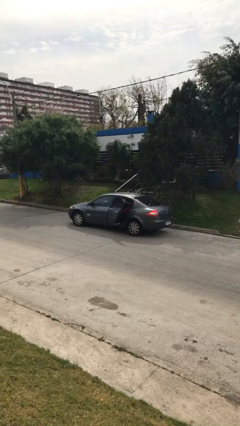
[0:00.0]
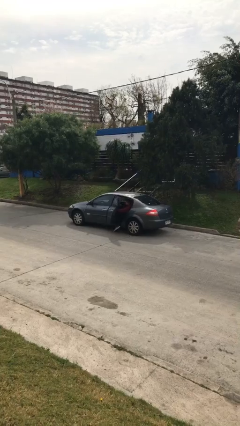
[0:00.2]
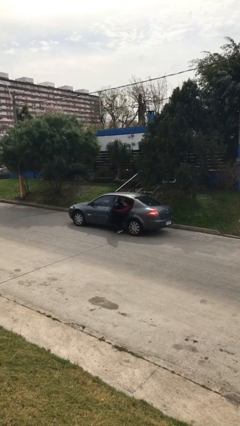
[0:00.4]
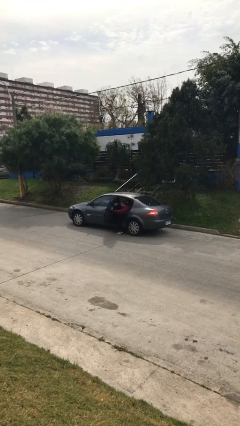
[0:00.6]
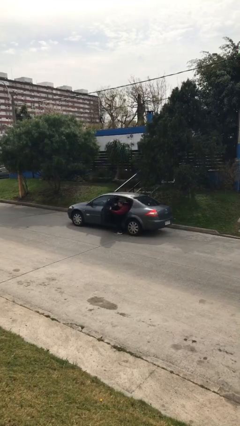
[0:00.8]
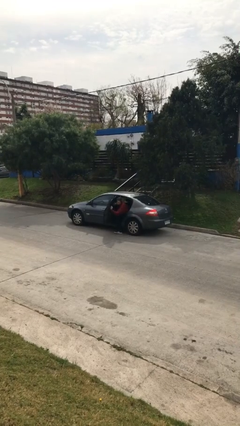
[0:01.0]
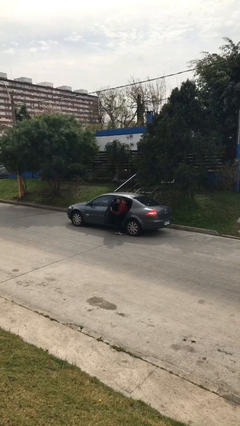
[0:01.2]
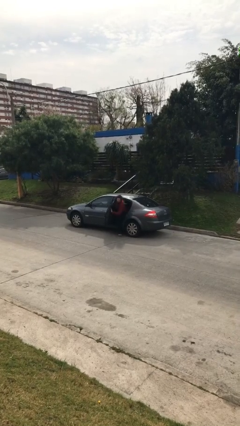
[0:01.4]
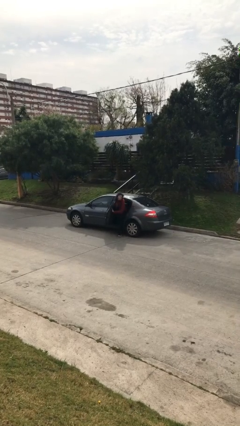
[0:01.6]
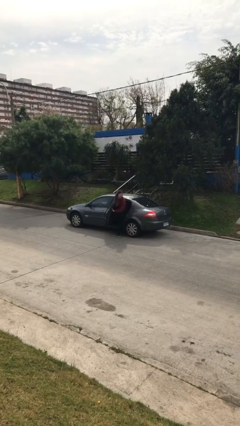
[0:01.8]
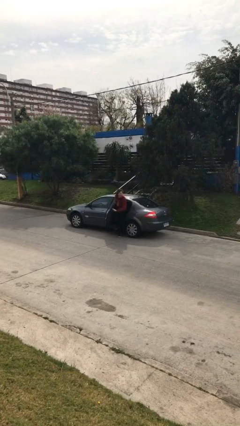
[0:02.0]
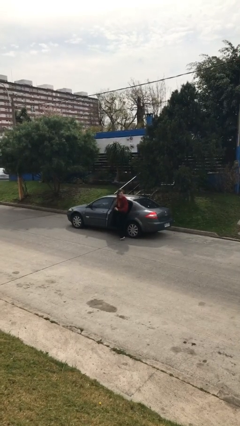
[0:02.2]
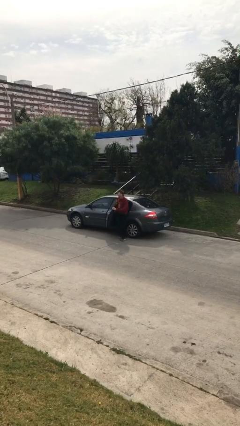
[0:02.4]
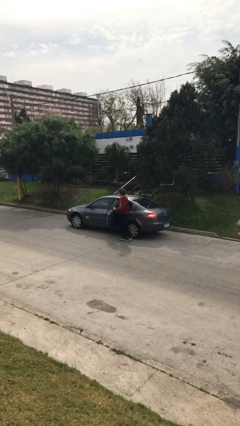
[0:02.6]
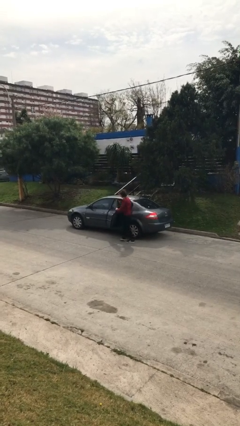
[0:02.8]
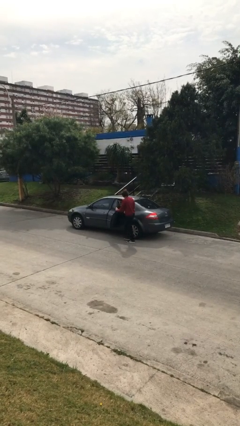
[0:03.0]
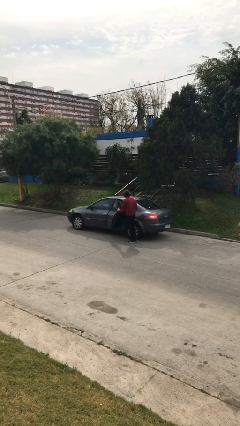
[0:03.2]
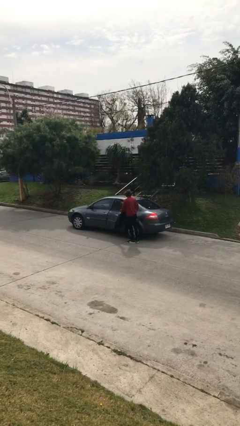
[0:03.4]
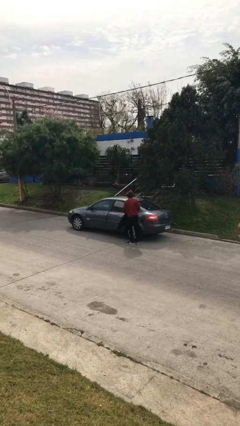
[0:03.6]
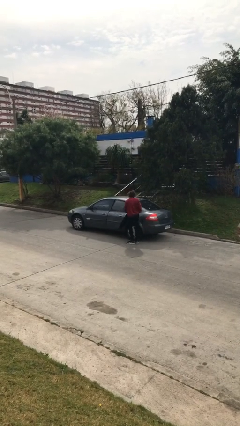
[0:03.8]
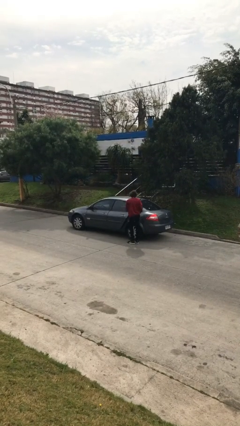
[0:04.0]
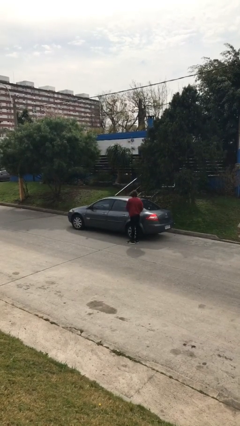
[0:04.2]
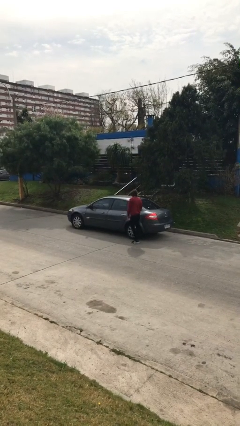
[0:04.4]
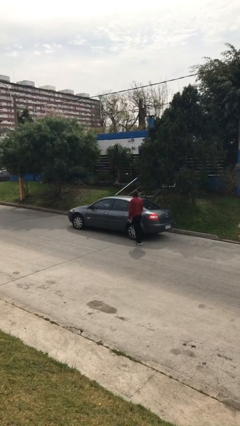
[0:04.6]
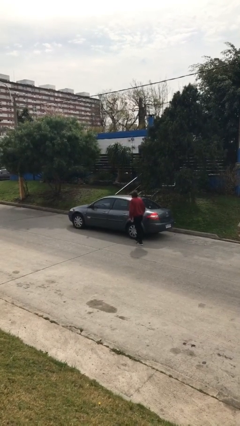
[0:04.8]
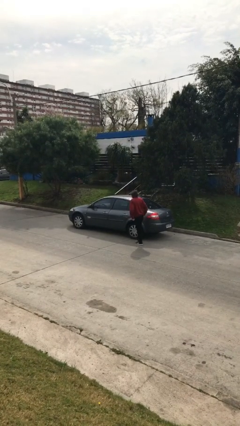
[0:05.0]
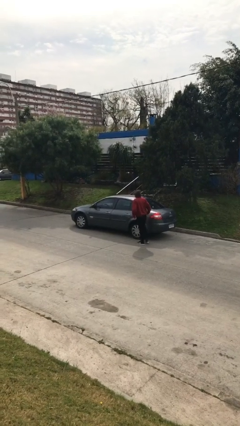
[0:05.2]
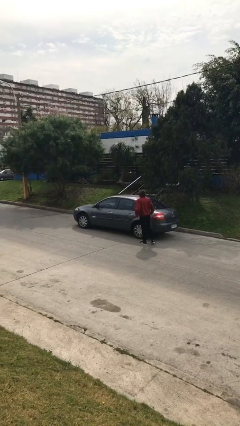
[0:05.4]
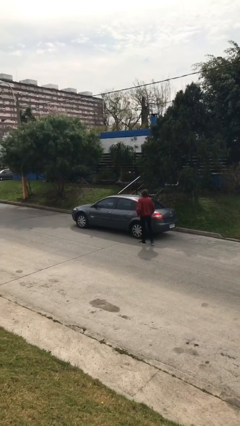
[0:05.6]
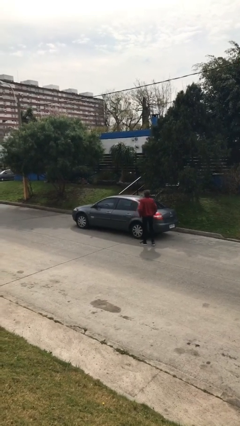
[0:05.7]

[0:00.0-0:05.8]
car drops off person

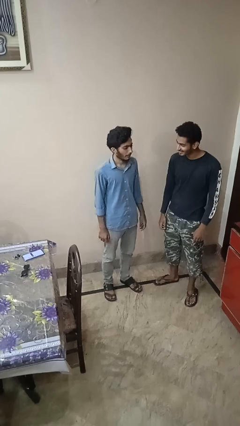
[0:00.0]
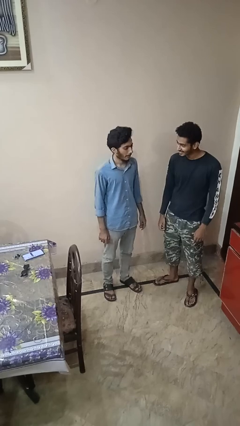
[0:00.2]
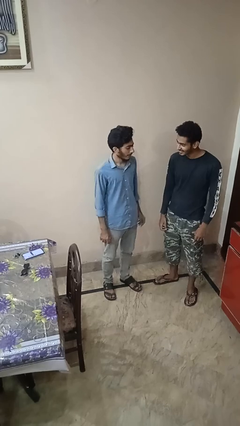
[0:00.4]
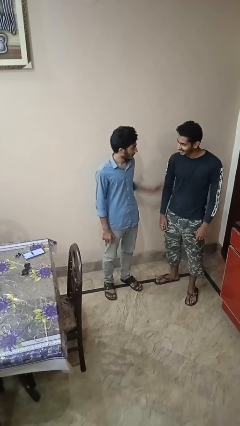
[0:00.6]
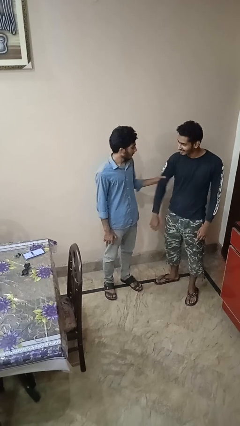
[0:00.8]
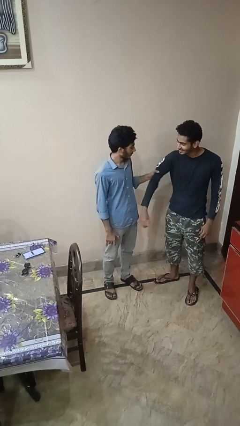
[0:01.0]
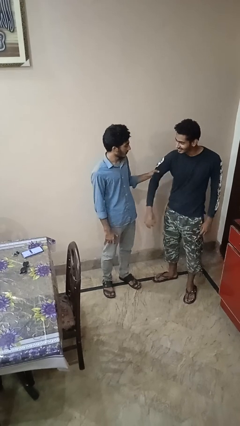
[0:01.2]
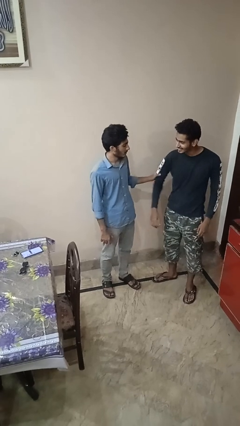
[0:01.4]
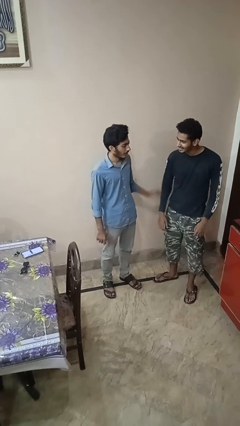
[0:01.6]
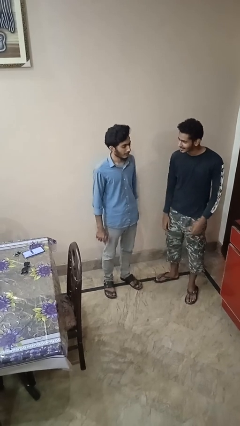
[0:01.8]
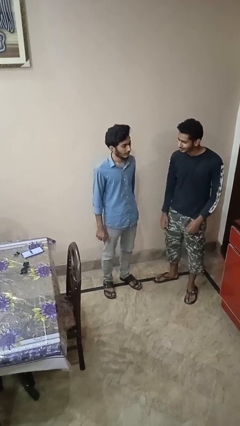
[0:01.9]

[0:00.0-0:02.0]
person grabs person by bicep

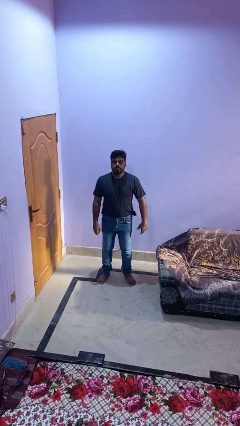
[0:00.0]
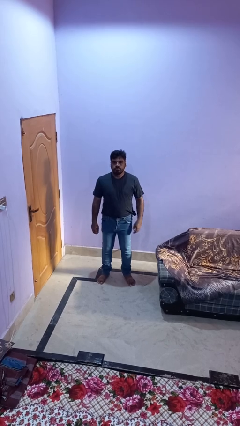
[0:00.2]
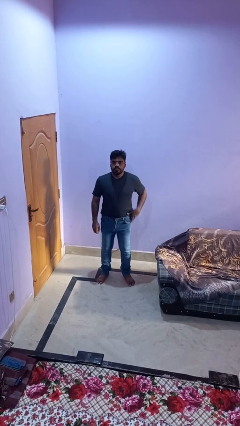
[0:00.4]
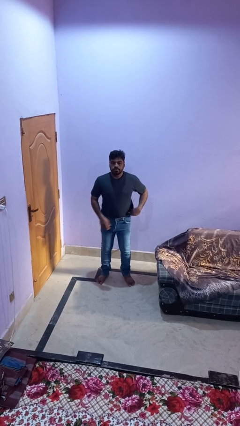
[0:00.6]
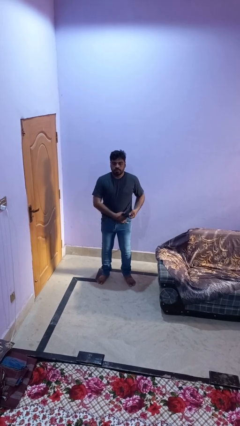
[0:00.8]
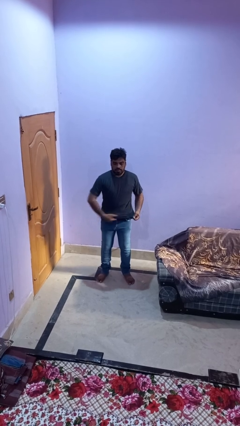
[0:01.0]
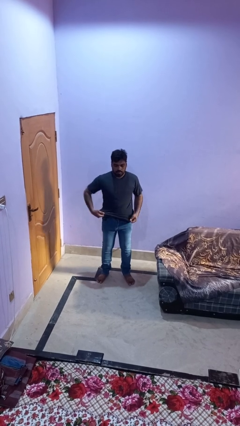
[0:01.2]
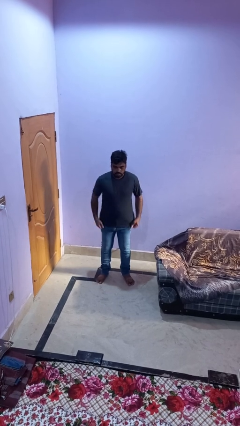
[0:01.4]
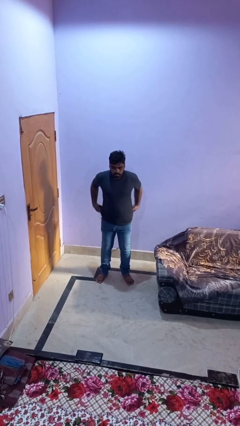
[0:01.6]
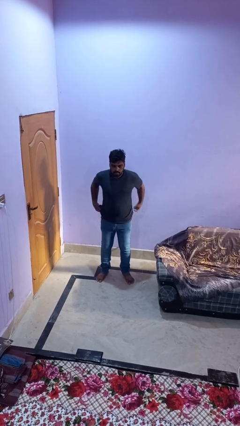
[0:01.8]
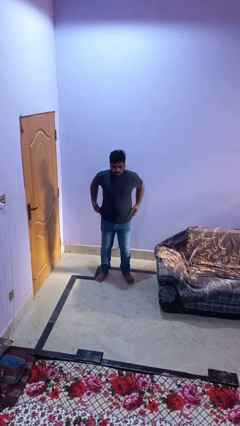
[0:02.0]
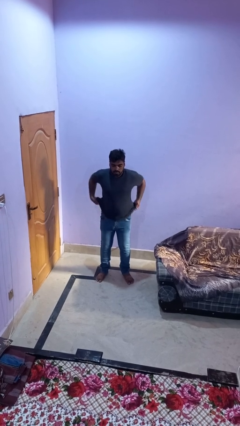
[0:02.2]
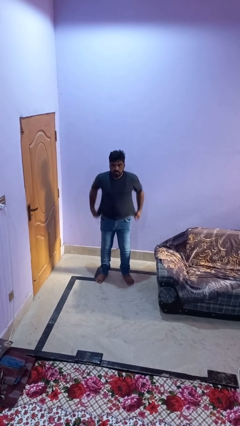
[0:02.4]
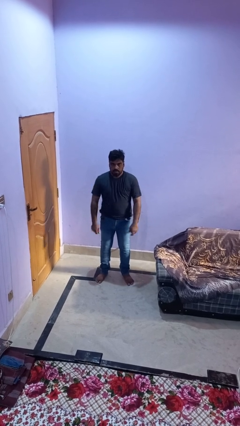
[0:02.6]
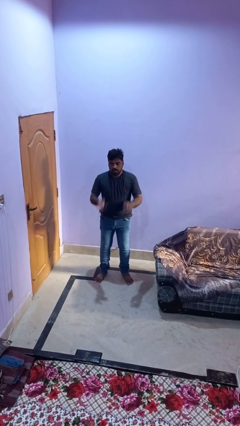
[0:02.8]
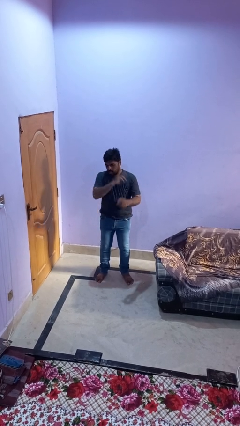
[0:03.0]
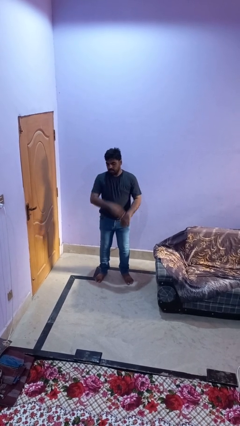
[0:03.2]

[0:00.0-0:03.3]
person untucks shirt

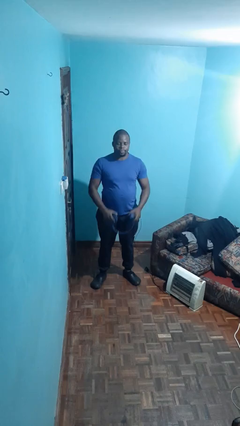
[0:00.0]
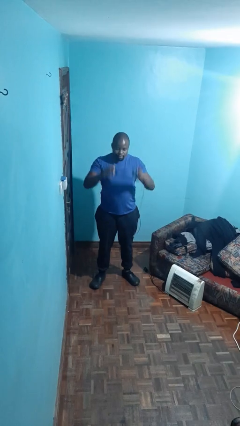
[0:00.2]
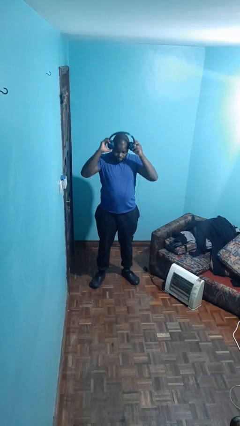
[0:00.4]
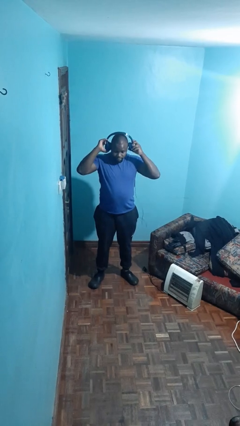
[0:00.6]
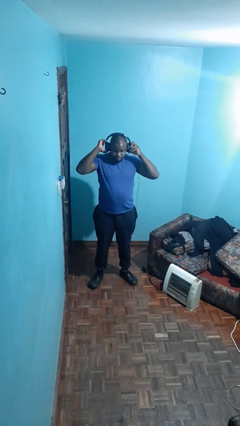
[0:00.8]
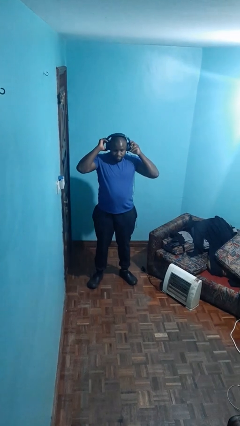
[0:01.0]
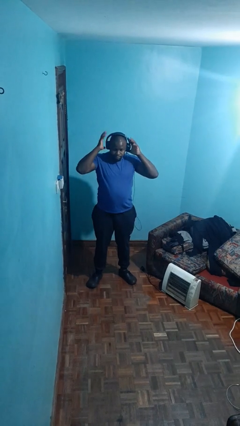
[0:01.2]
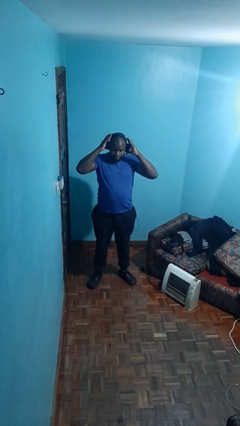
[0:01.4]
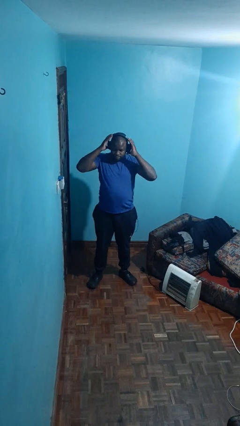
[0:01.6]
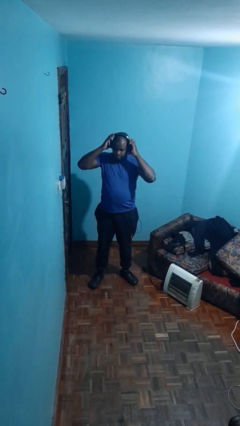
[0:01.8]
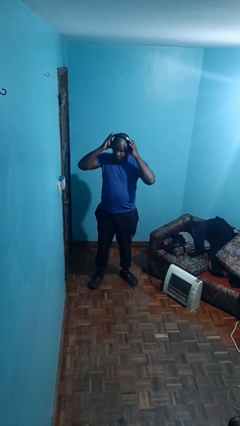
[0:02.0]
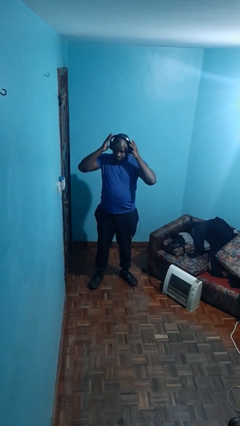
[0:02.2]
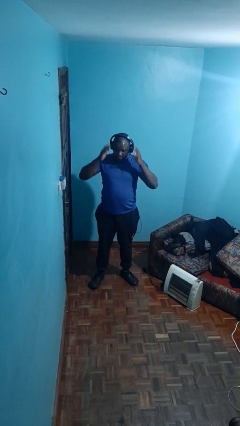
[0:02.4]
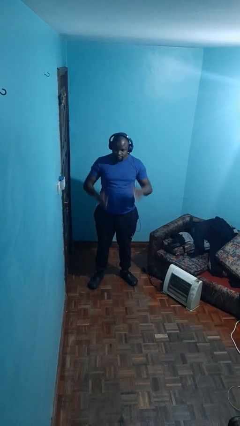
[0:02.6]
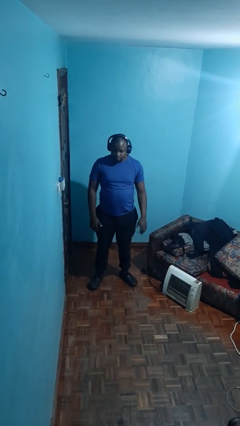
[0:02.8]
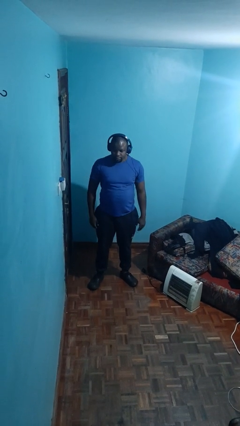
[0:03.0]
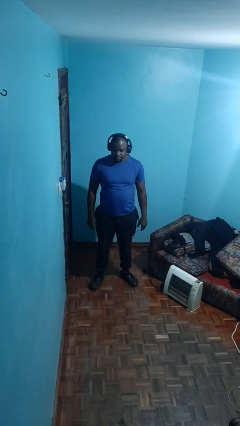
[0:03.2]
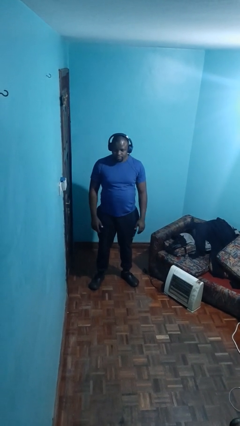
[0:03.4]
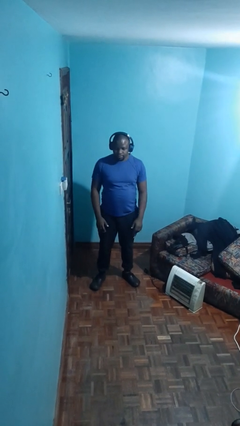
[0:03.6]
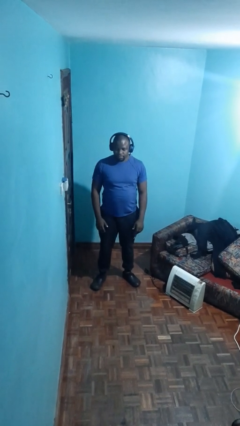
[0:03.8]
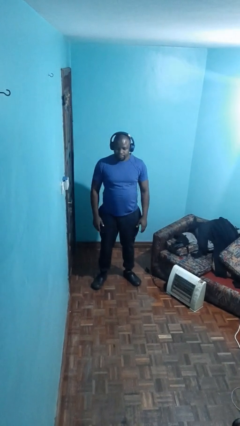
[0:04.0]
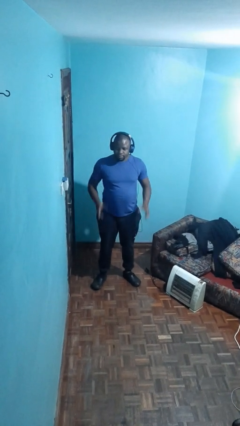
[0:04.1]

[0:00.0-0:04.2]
person puts on headphones

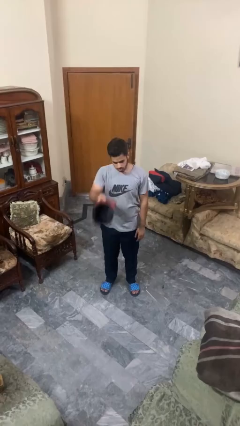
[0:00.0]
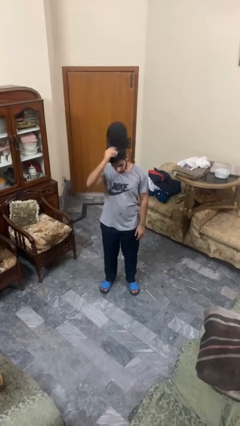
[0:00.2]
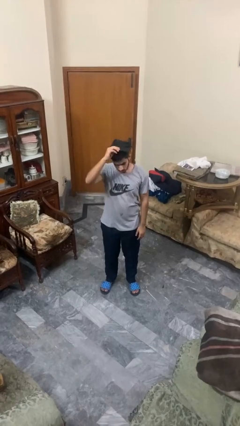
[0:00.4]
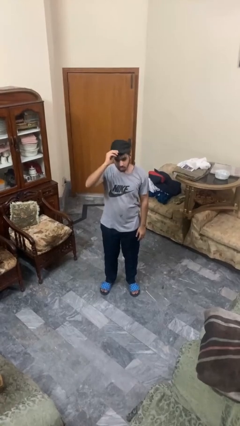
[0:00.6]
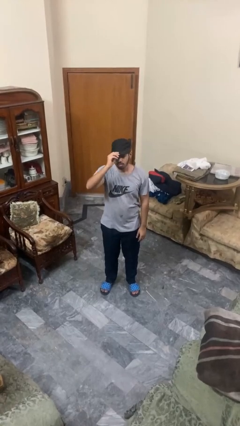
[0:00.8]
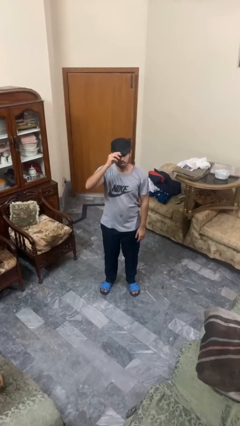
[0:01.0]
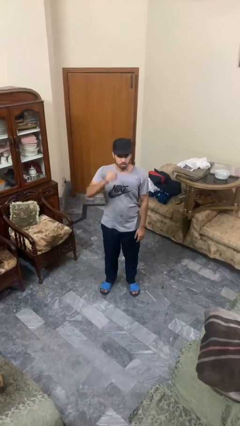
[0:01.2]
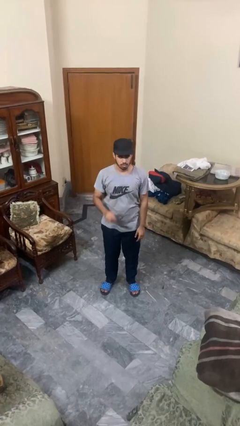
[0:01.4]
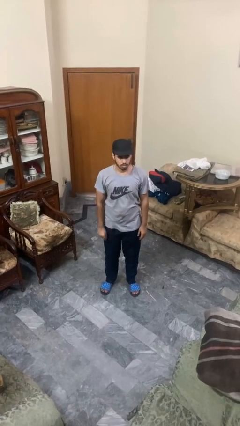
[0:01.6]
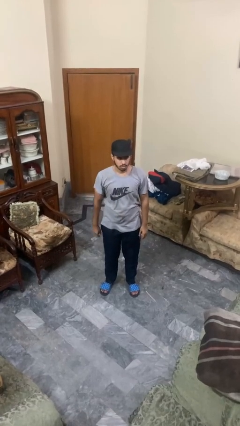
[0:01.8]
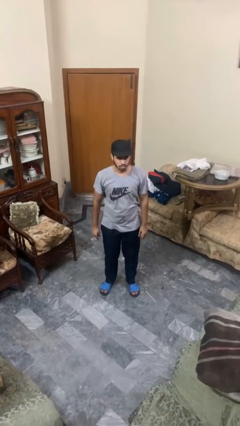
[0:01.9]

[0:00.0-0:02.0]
person puts on hat

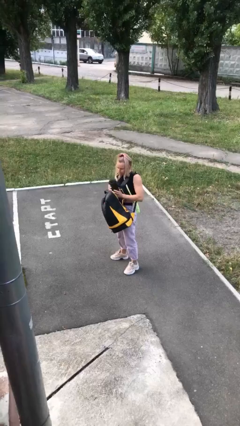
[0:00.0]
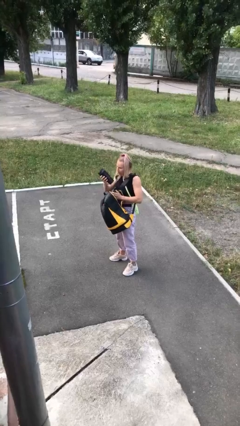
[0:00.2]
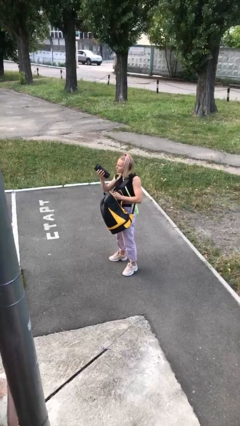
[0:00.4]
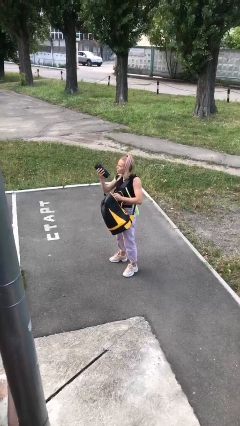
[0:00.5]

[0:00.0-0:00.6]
person takes object from backpack
